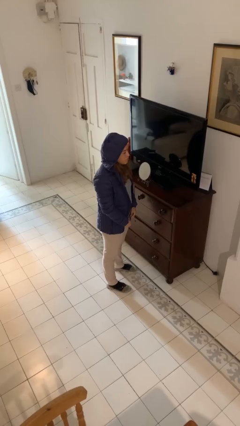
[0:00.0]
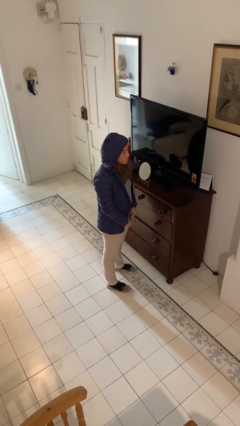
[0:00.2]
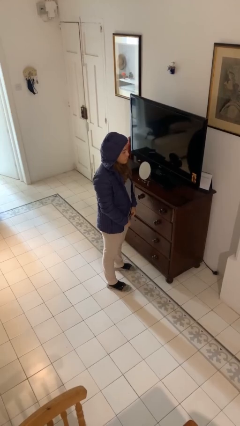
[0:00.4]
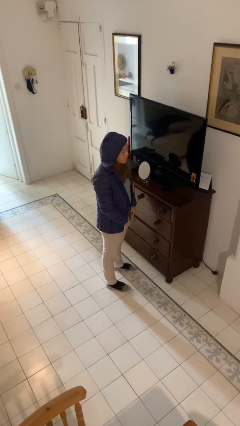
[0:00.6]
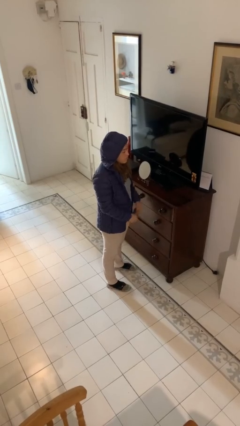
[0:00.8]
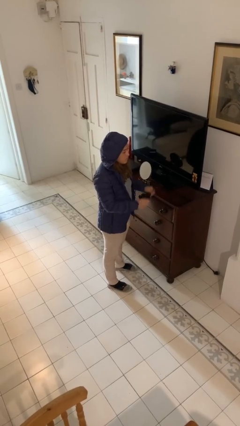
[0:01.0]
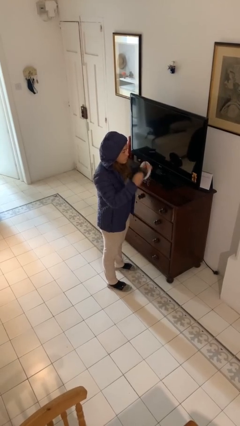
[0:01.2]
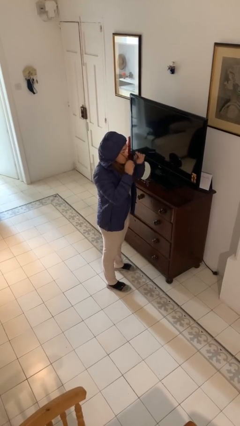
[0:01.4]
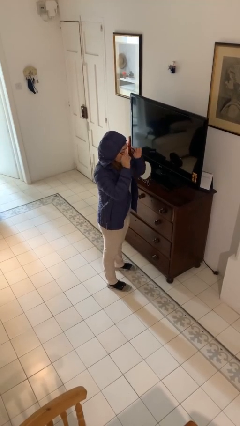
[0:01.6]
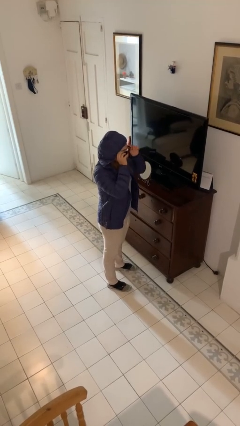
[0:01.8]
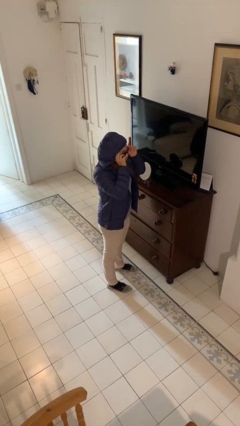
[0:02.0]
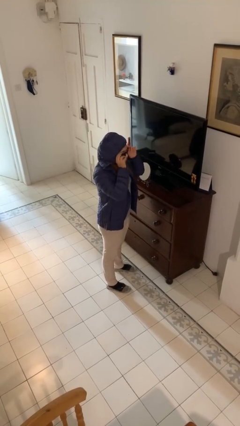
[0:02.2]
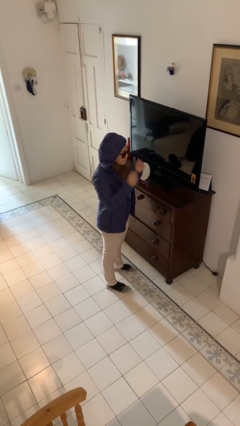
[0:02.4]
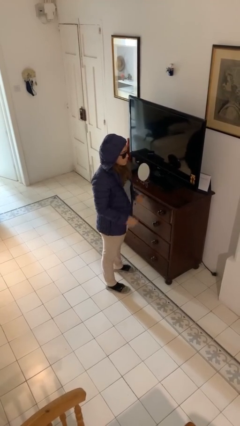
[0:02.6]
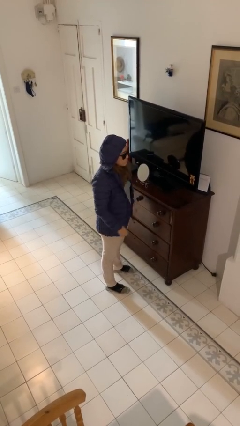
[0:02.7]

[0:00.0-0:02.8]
person puts on sunglasses

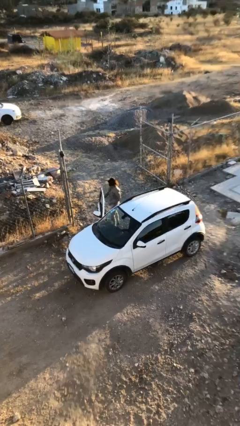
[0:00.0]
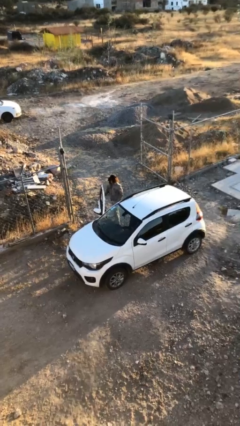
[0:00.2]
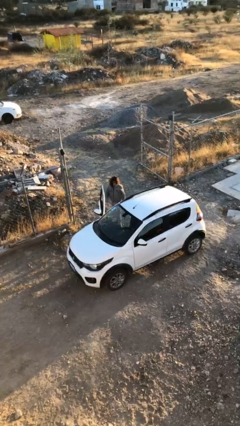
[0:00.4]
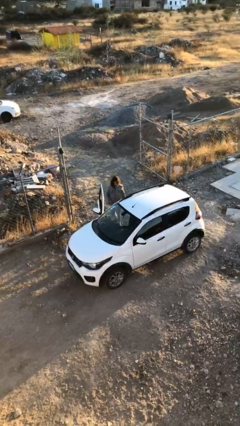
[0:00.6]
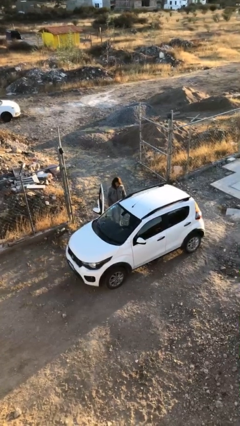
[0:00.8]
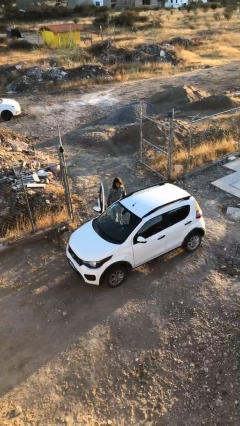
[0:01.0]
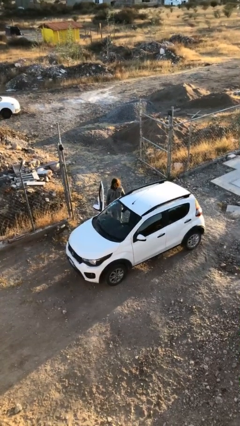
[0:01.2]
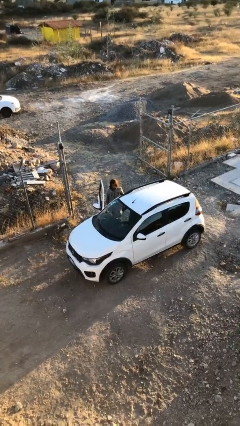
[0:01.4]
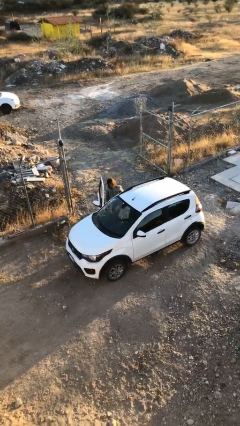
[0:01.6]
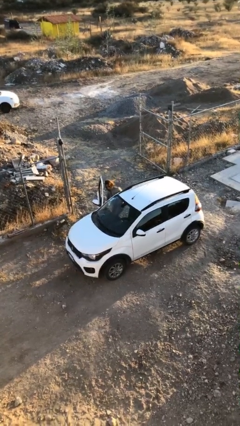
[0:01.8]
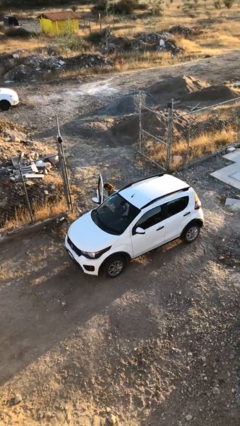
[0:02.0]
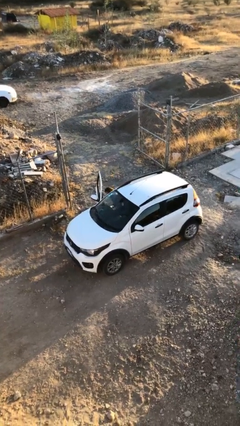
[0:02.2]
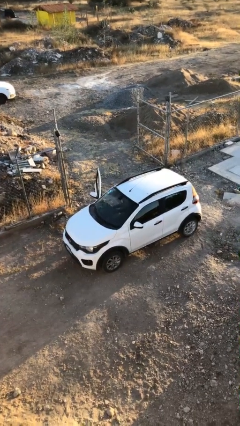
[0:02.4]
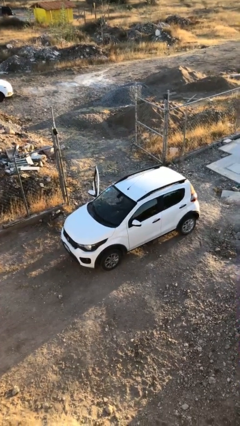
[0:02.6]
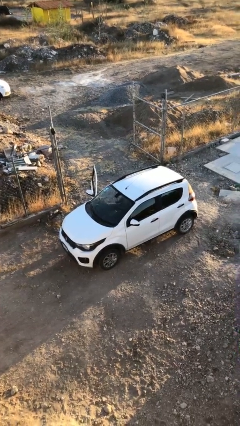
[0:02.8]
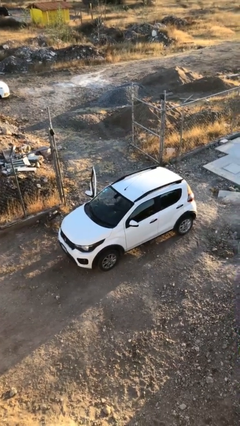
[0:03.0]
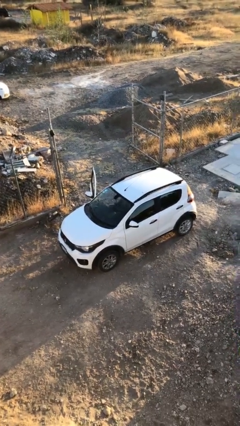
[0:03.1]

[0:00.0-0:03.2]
person enters car

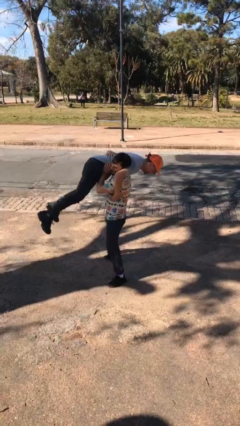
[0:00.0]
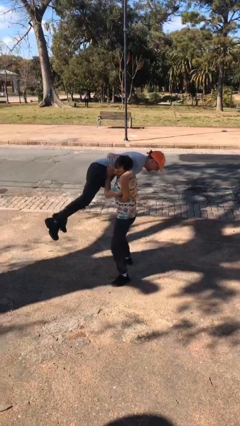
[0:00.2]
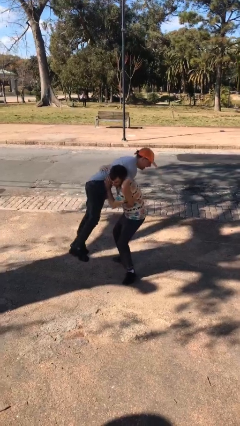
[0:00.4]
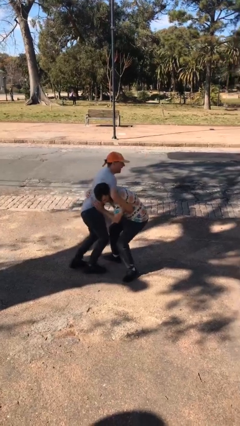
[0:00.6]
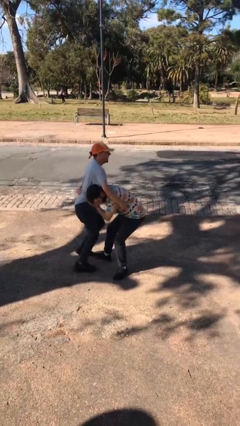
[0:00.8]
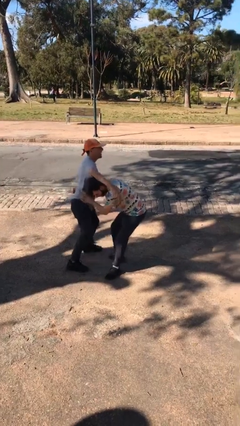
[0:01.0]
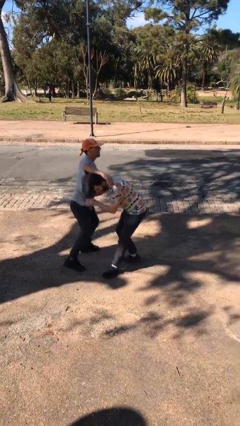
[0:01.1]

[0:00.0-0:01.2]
person puts down person

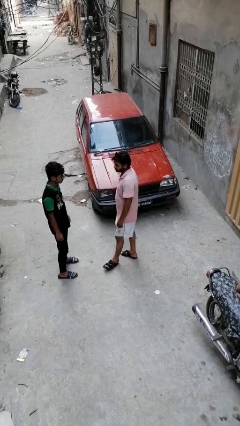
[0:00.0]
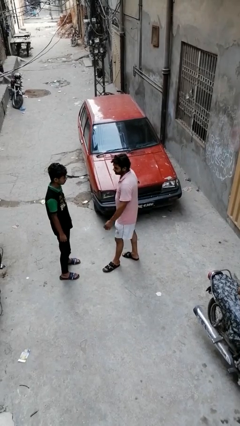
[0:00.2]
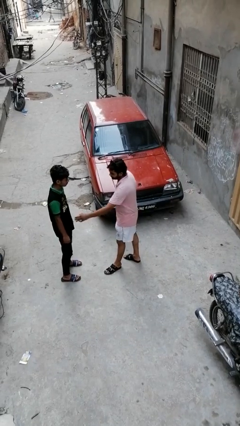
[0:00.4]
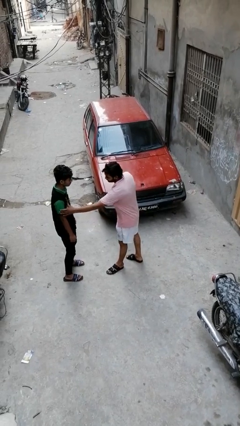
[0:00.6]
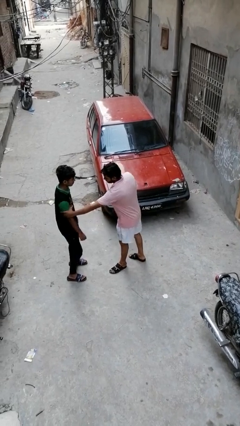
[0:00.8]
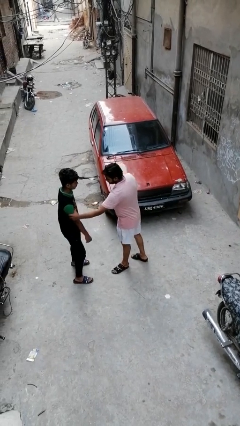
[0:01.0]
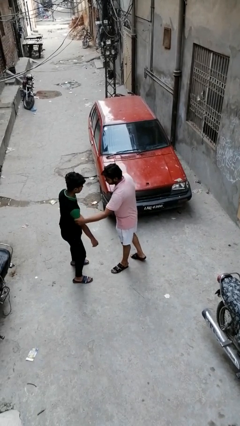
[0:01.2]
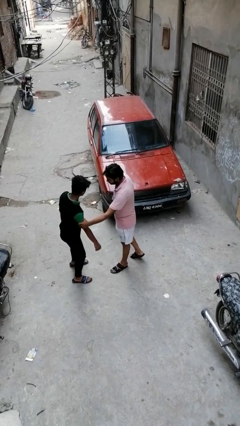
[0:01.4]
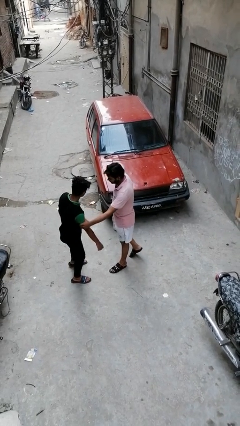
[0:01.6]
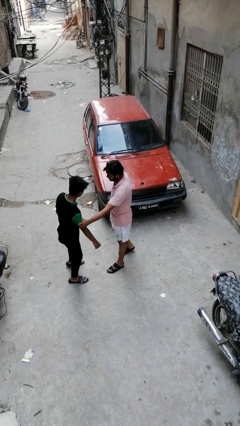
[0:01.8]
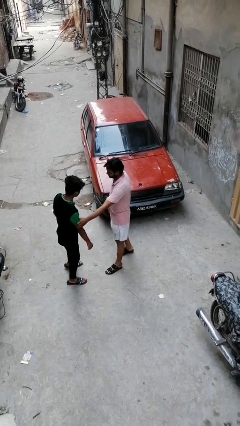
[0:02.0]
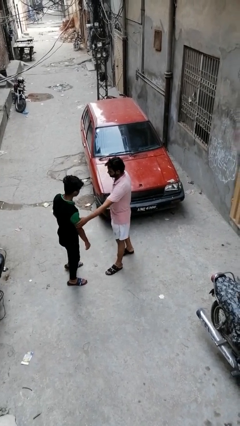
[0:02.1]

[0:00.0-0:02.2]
person grabs person by bicep

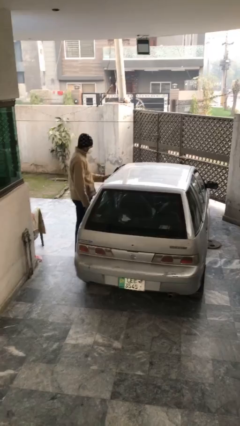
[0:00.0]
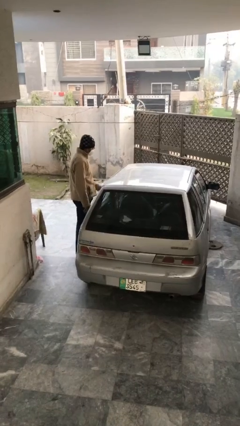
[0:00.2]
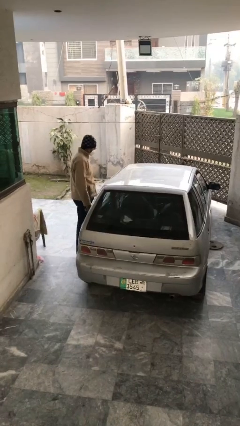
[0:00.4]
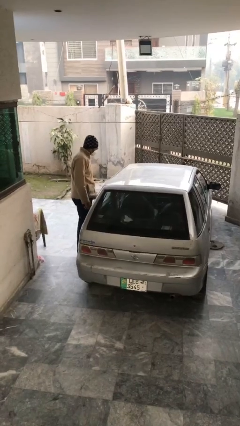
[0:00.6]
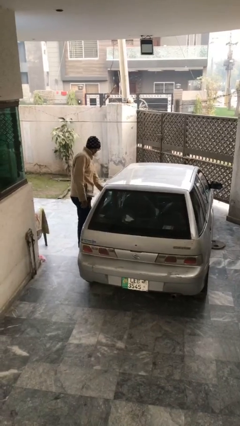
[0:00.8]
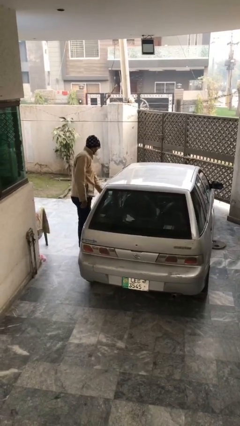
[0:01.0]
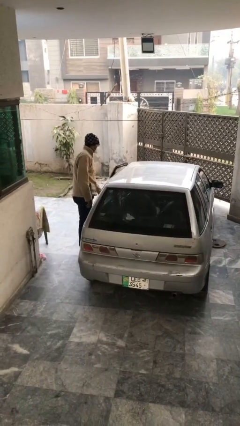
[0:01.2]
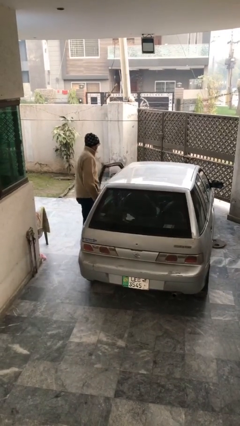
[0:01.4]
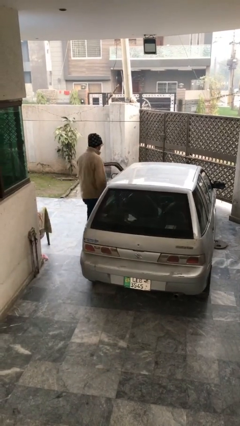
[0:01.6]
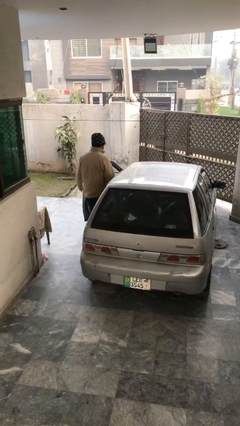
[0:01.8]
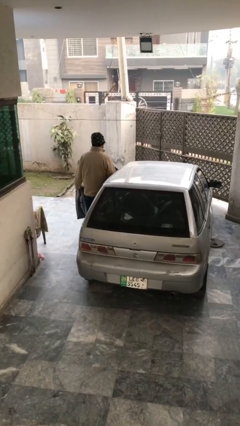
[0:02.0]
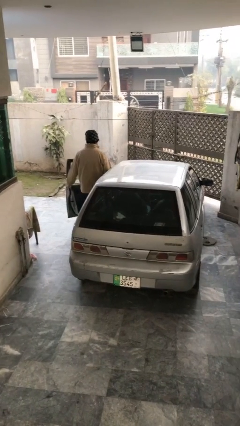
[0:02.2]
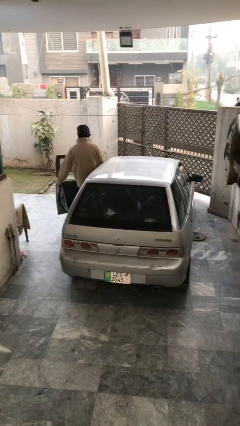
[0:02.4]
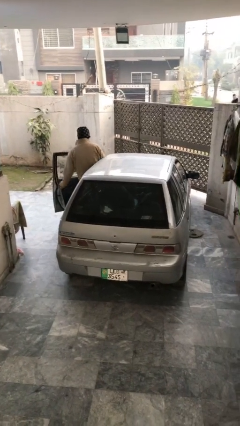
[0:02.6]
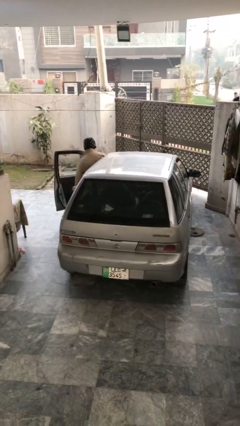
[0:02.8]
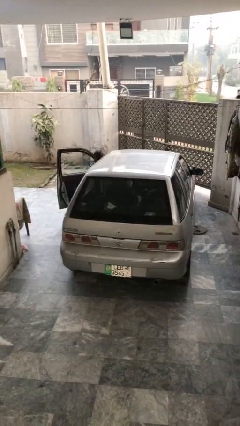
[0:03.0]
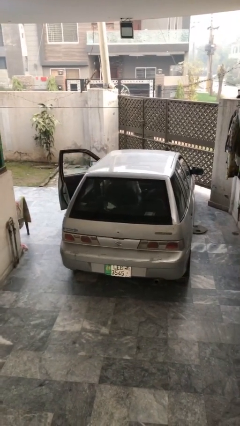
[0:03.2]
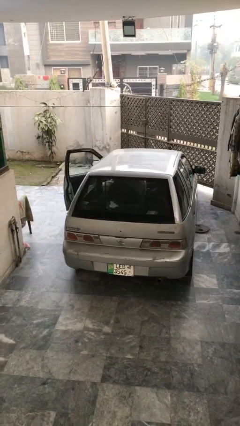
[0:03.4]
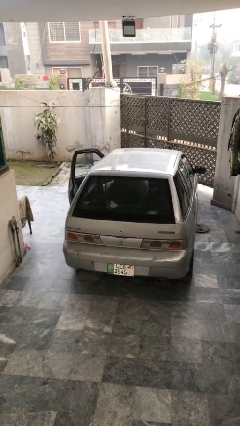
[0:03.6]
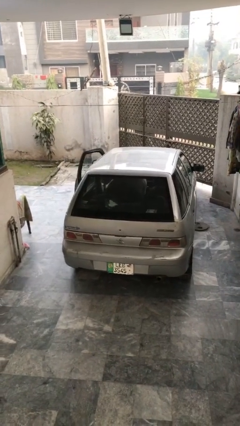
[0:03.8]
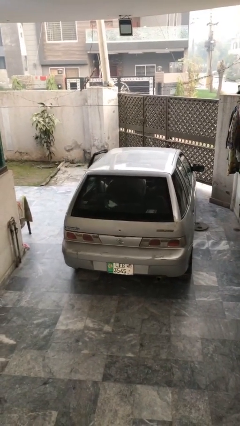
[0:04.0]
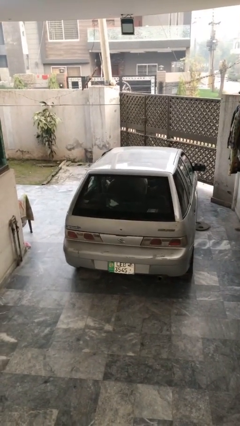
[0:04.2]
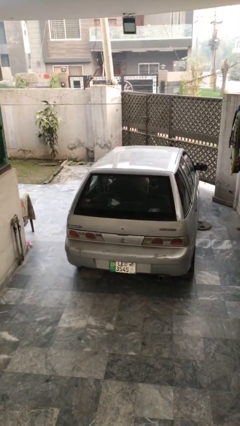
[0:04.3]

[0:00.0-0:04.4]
car picks up person

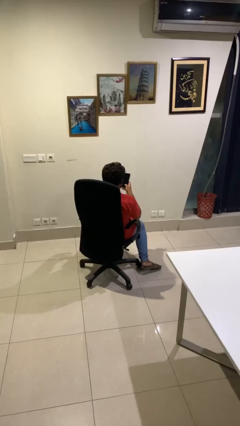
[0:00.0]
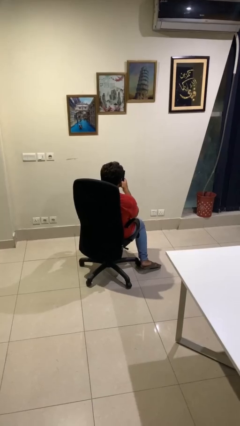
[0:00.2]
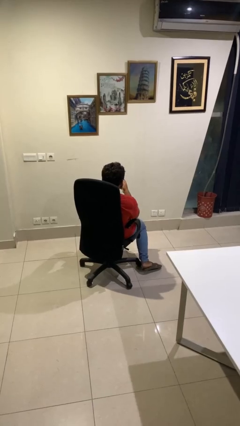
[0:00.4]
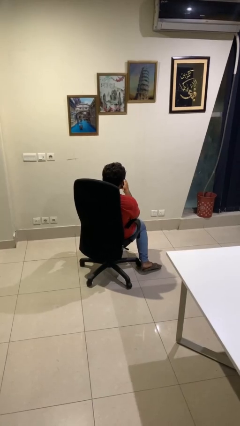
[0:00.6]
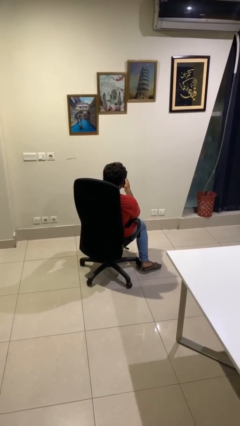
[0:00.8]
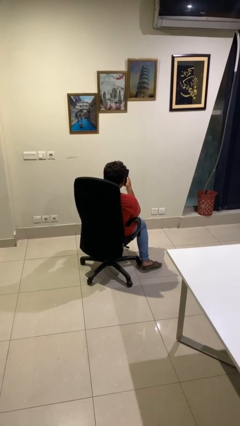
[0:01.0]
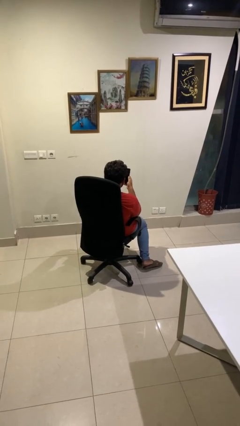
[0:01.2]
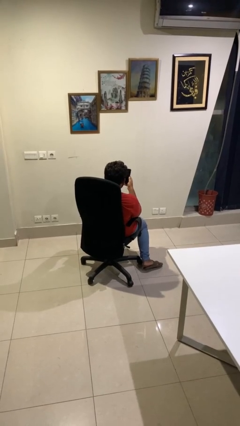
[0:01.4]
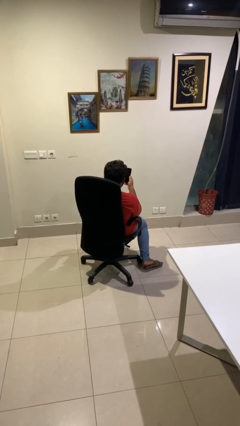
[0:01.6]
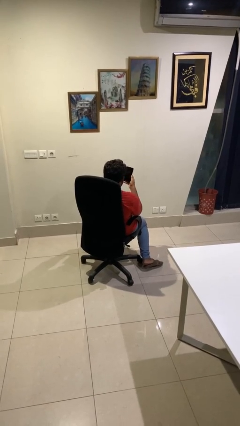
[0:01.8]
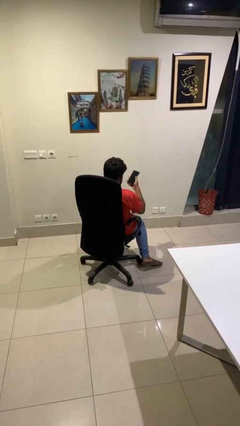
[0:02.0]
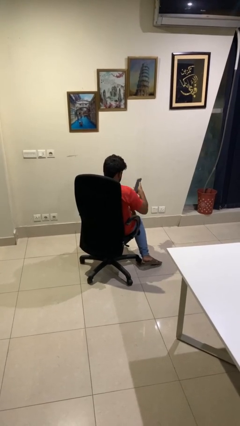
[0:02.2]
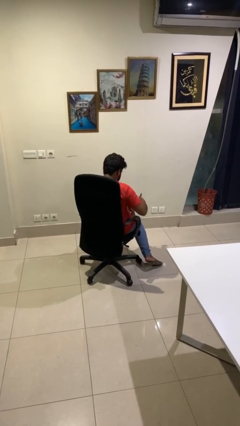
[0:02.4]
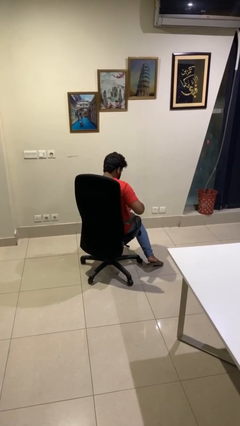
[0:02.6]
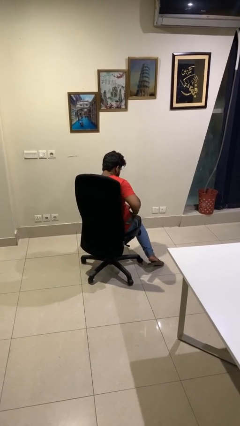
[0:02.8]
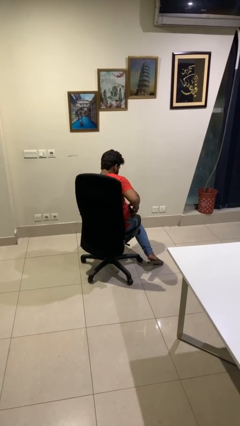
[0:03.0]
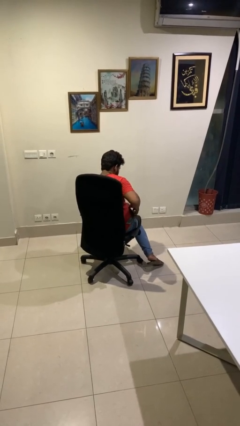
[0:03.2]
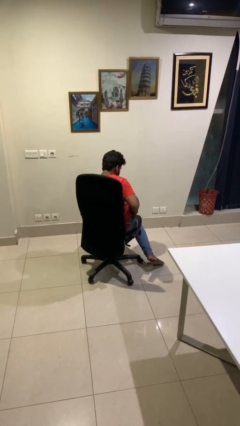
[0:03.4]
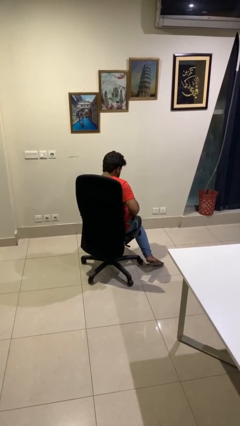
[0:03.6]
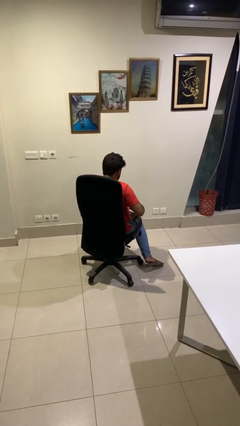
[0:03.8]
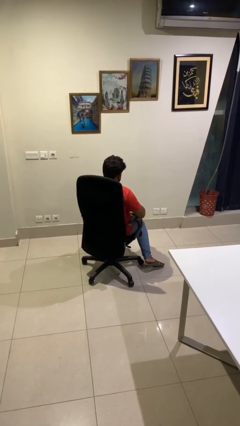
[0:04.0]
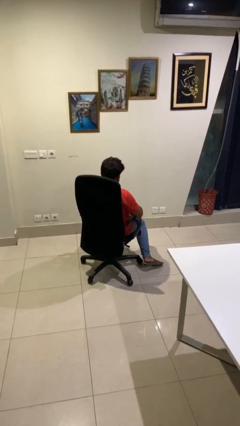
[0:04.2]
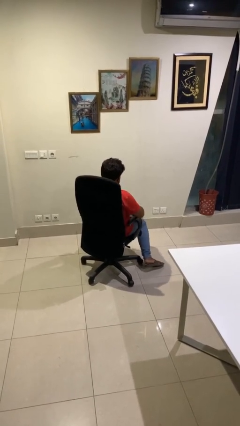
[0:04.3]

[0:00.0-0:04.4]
person puts phone into pocket
